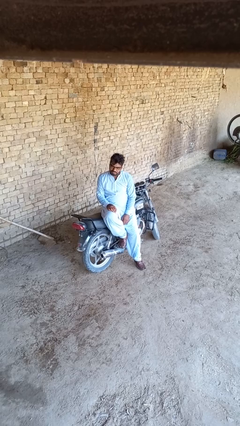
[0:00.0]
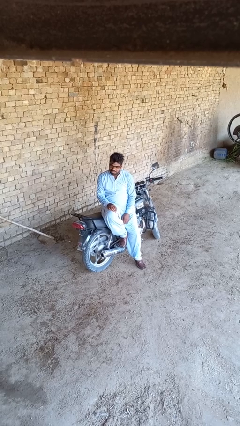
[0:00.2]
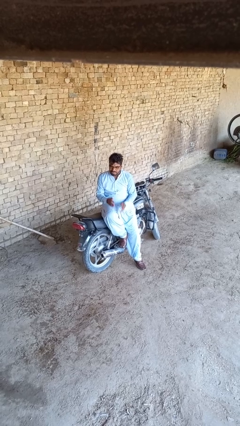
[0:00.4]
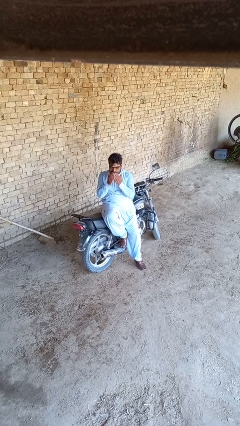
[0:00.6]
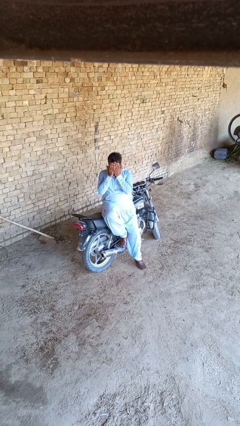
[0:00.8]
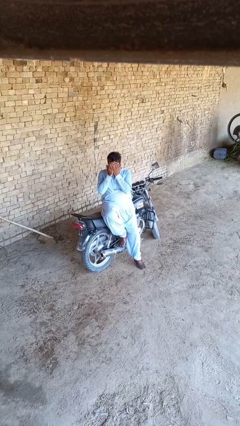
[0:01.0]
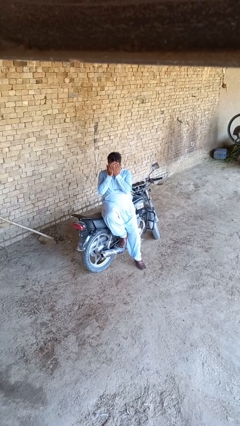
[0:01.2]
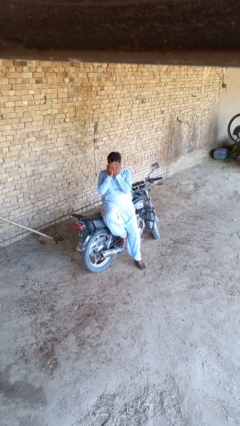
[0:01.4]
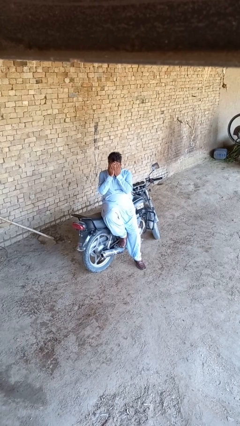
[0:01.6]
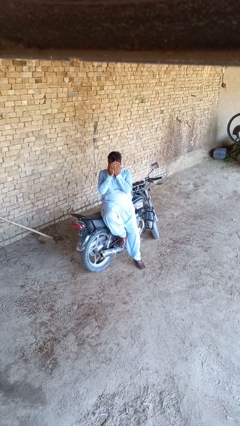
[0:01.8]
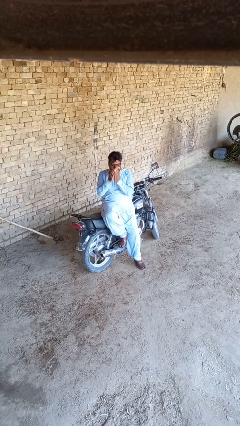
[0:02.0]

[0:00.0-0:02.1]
person covers face with hands

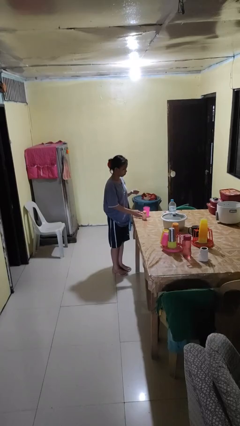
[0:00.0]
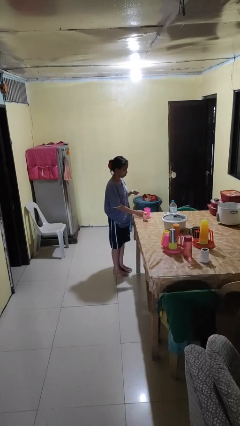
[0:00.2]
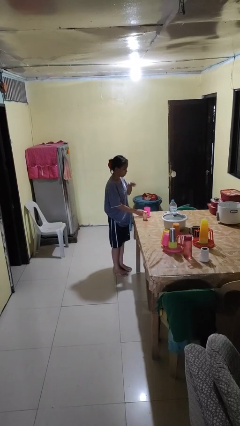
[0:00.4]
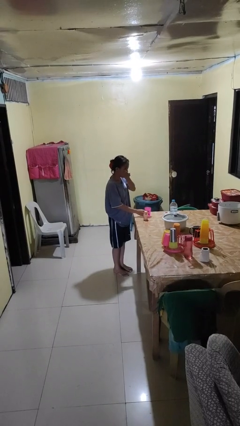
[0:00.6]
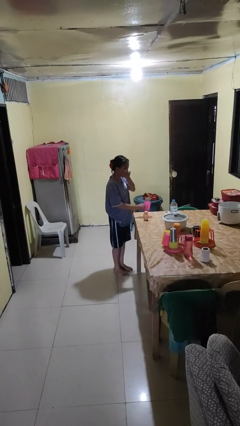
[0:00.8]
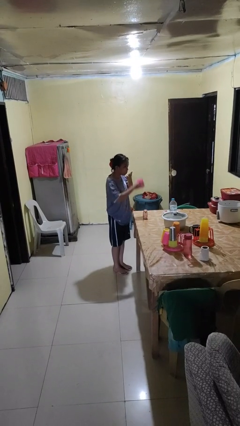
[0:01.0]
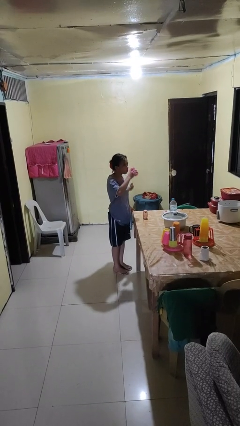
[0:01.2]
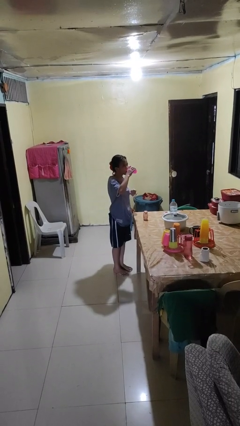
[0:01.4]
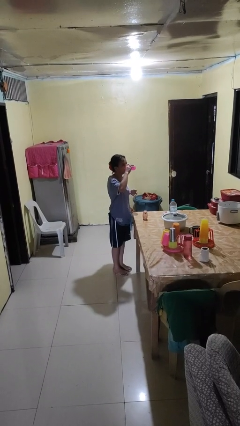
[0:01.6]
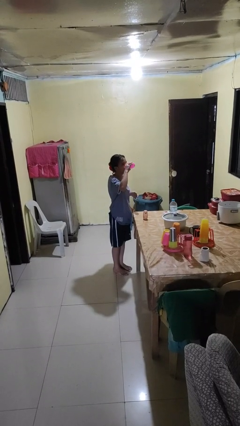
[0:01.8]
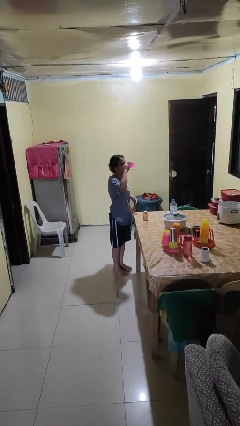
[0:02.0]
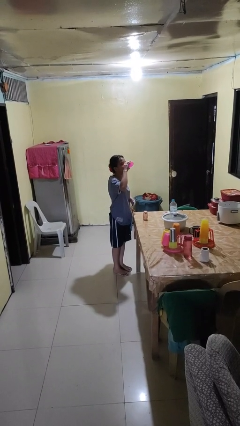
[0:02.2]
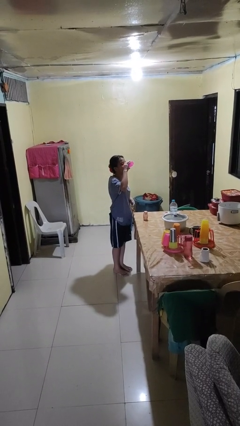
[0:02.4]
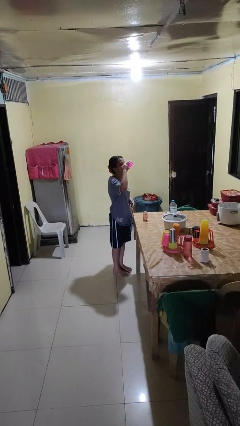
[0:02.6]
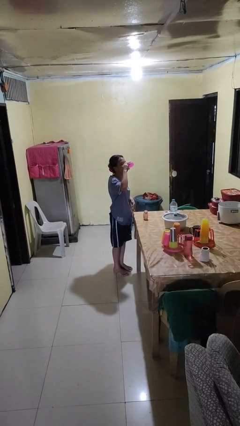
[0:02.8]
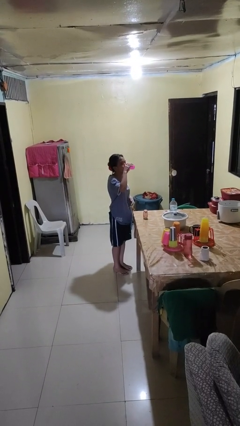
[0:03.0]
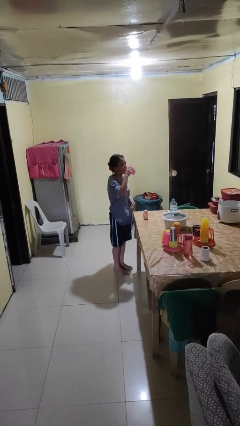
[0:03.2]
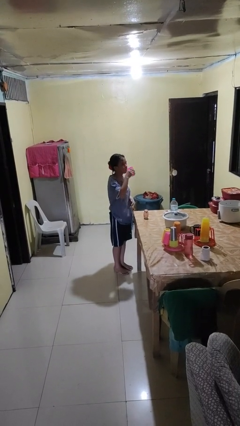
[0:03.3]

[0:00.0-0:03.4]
person drinks from cup

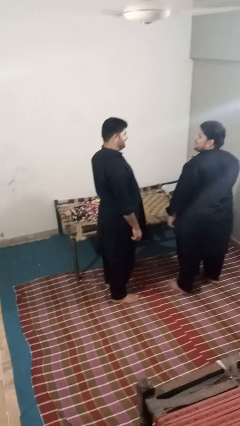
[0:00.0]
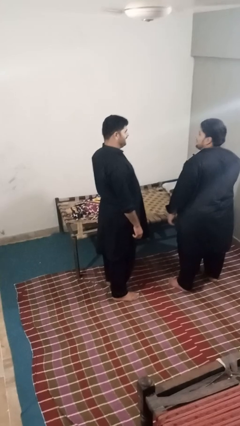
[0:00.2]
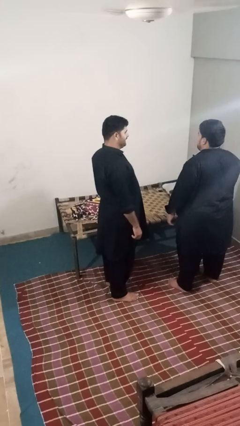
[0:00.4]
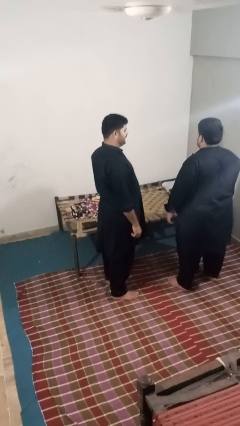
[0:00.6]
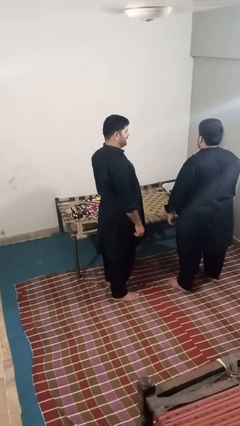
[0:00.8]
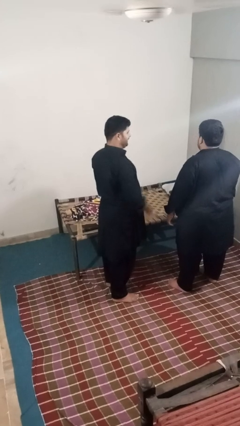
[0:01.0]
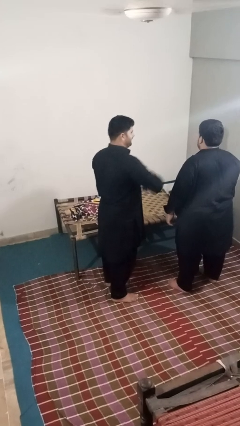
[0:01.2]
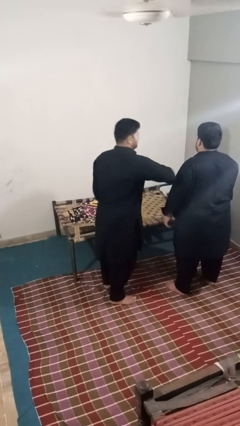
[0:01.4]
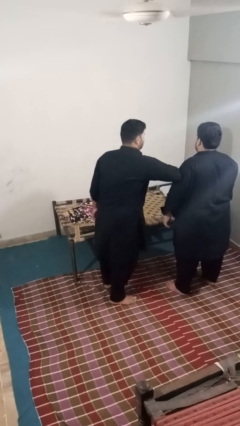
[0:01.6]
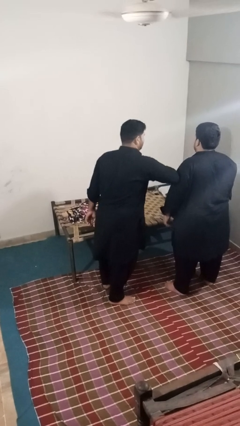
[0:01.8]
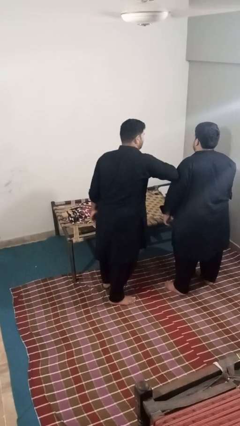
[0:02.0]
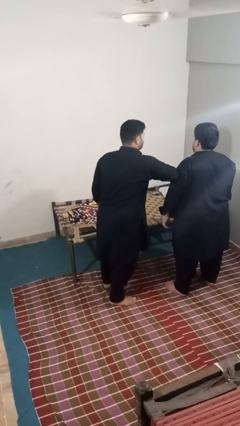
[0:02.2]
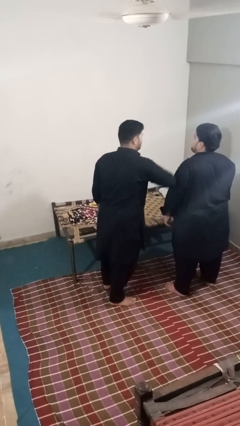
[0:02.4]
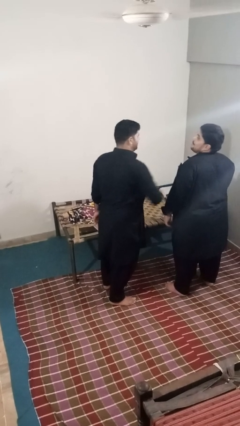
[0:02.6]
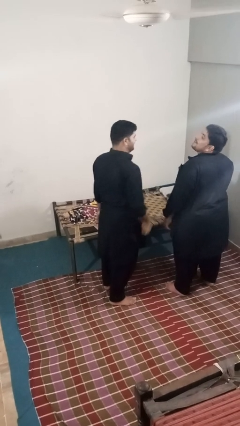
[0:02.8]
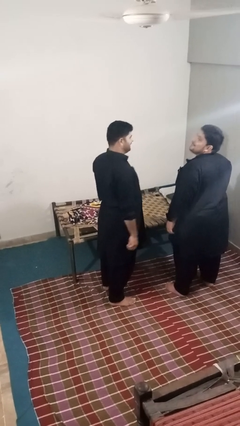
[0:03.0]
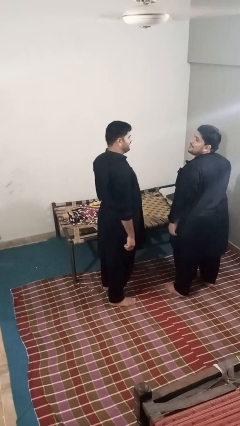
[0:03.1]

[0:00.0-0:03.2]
person nudges person with elbow

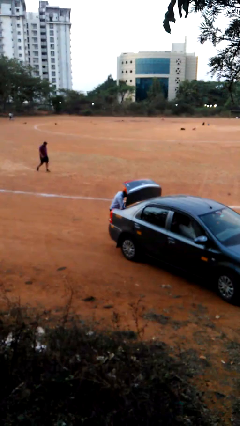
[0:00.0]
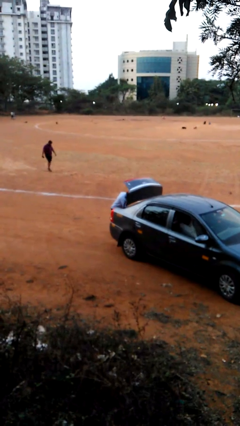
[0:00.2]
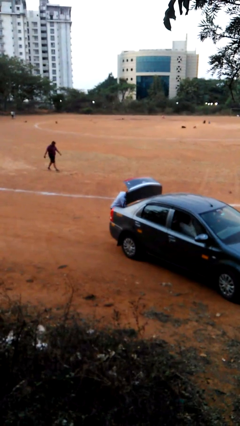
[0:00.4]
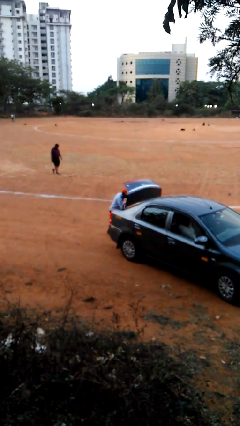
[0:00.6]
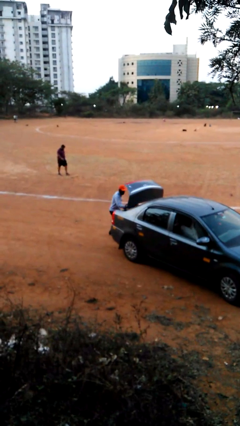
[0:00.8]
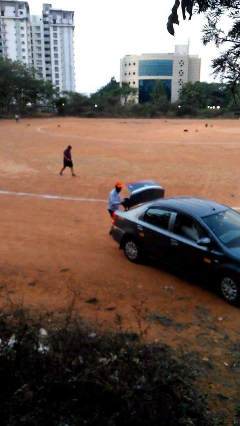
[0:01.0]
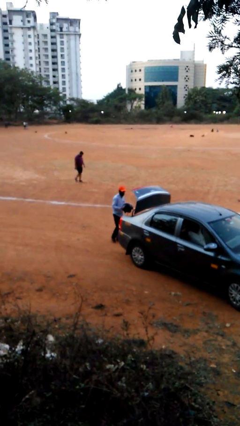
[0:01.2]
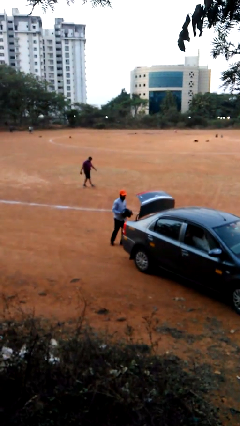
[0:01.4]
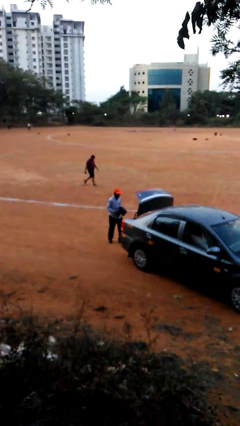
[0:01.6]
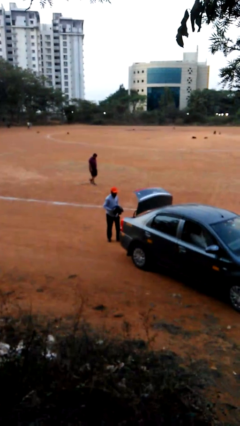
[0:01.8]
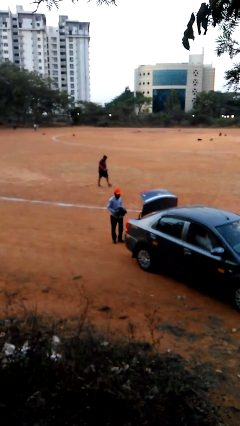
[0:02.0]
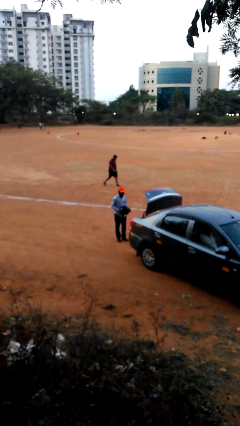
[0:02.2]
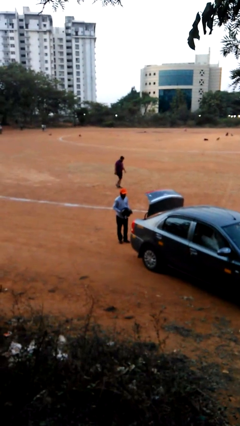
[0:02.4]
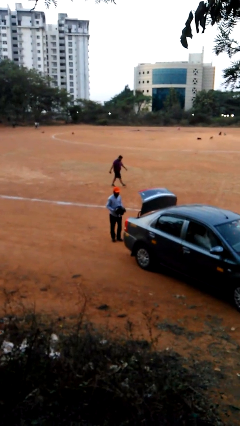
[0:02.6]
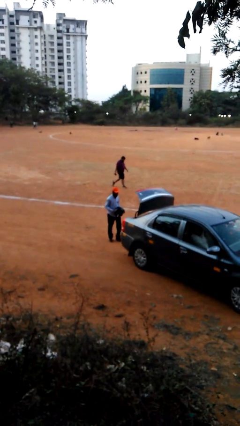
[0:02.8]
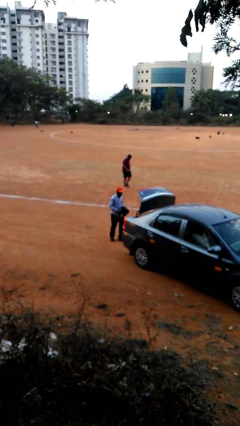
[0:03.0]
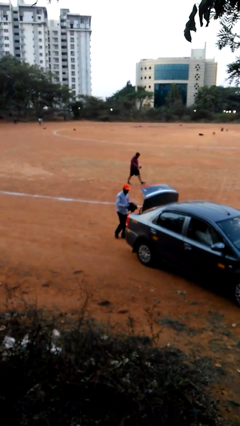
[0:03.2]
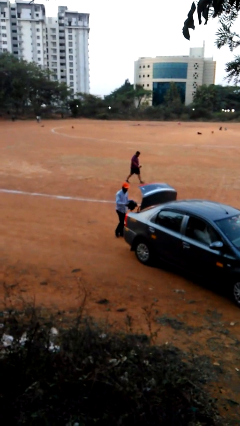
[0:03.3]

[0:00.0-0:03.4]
person unloads car

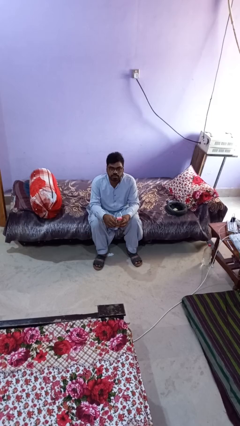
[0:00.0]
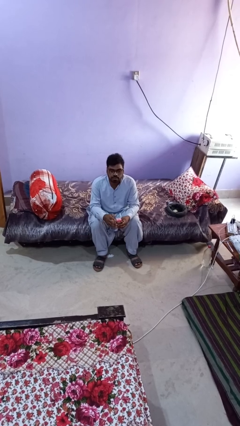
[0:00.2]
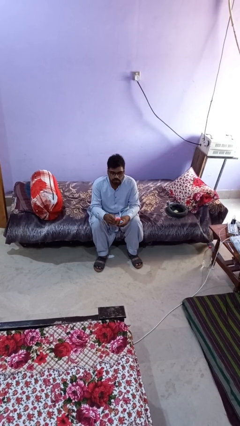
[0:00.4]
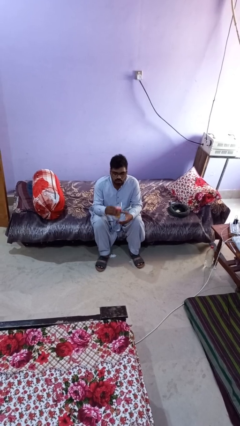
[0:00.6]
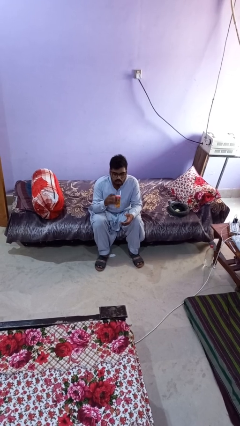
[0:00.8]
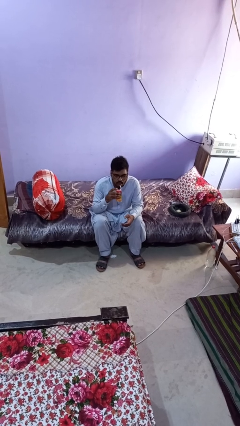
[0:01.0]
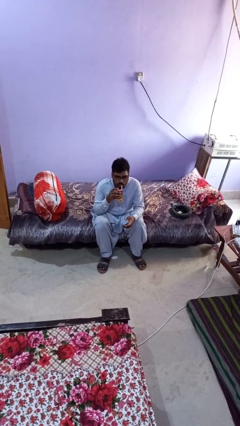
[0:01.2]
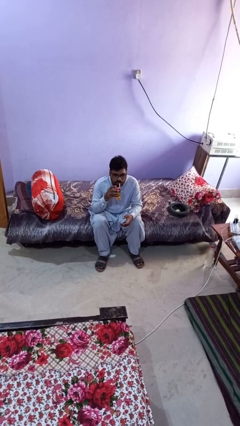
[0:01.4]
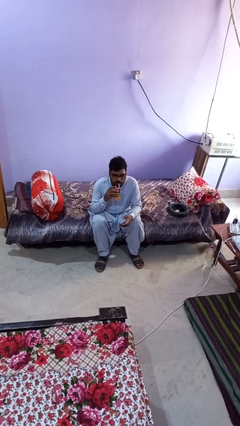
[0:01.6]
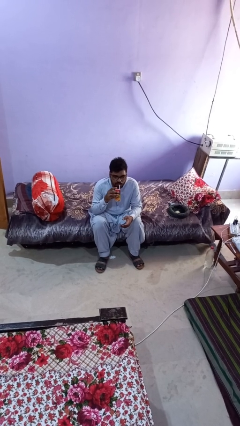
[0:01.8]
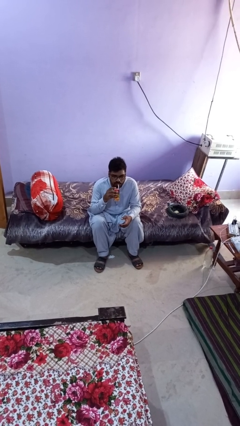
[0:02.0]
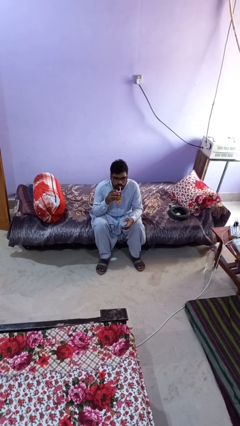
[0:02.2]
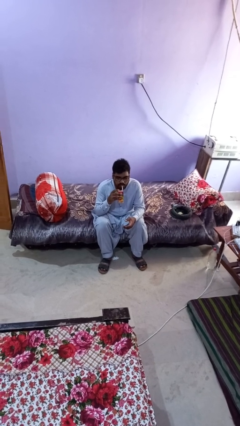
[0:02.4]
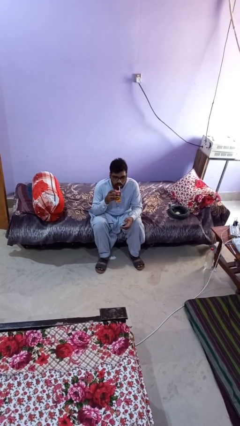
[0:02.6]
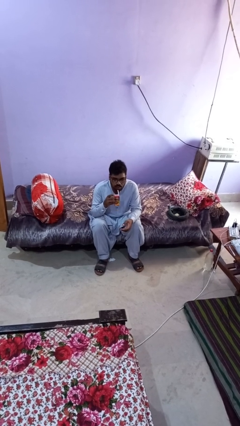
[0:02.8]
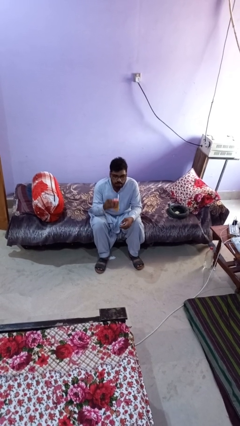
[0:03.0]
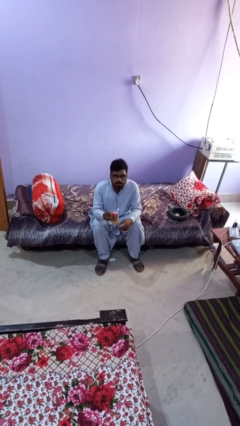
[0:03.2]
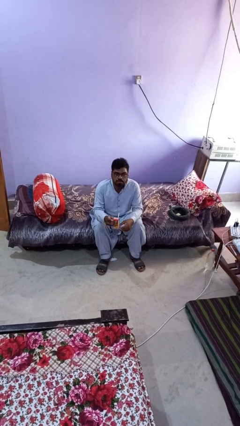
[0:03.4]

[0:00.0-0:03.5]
person drinks from straw

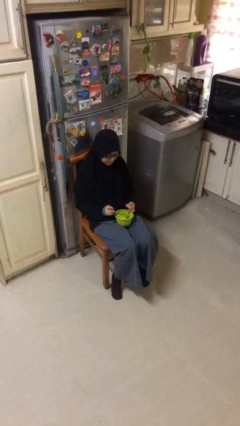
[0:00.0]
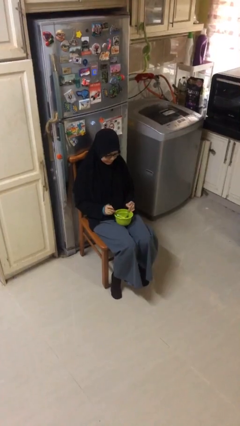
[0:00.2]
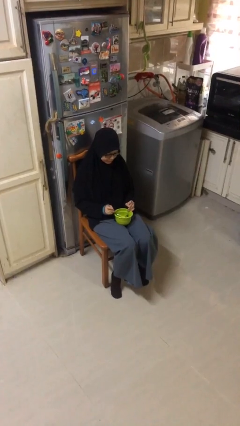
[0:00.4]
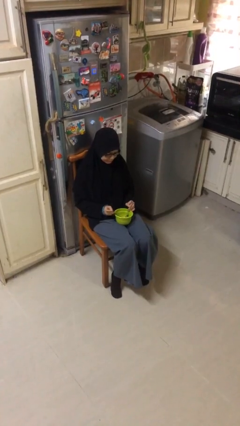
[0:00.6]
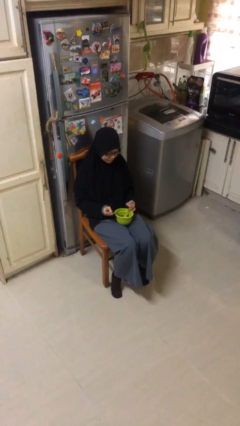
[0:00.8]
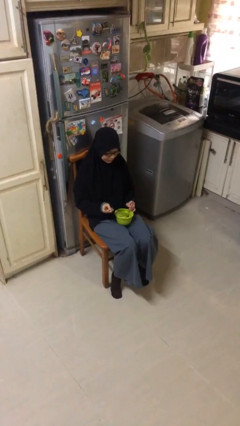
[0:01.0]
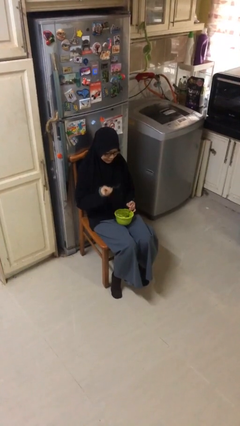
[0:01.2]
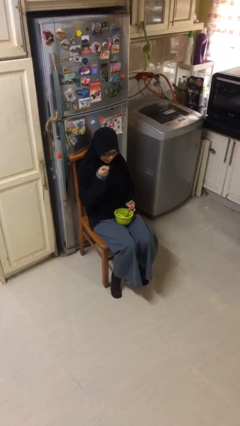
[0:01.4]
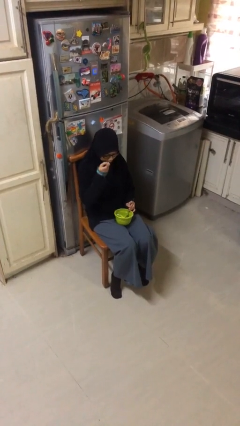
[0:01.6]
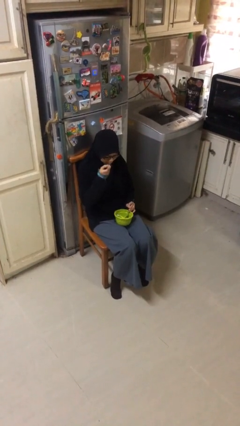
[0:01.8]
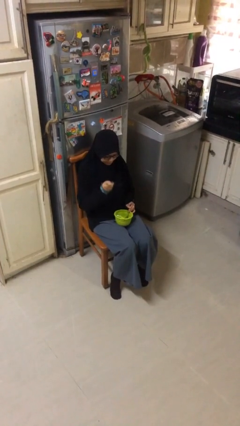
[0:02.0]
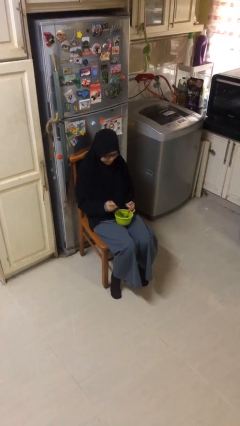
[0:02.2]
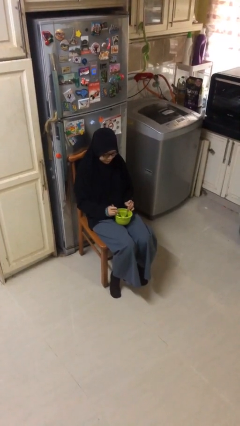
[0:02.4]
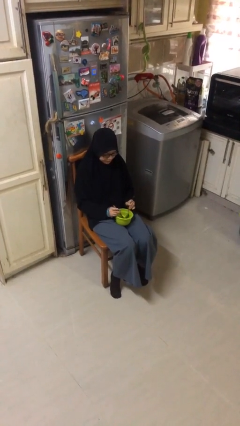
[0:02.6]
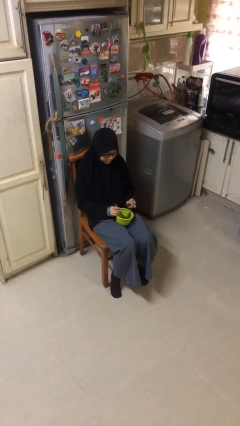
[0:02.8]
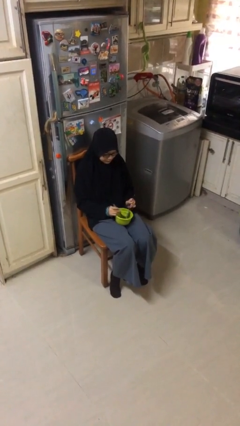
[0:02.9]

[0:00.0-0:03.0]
person eats with utensil
